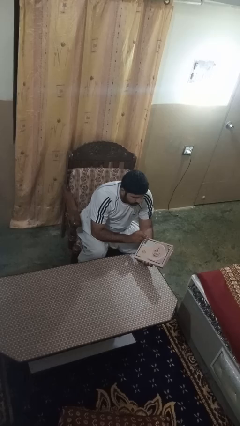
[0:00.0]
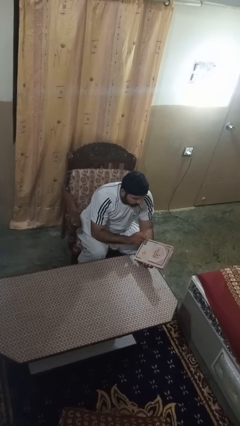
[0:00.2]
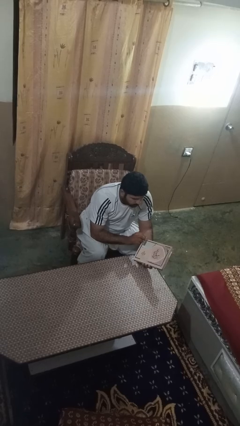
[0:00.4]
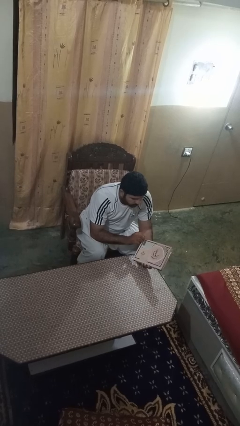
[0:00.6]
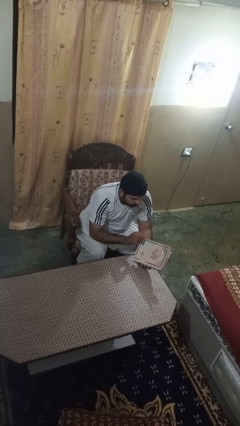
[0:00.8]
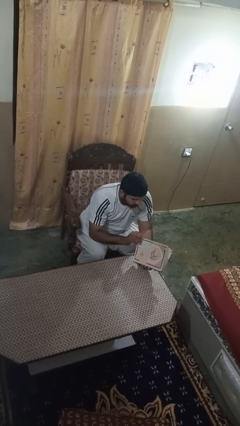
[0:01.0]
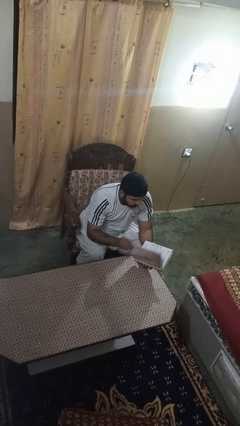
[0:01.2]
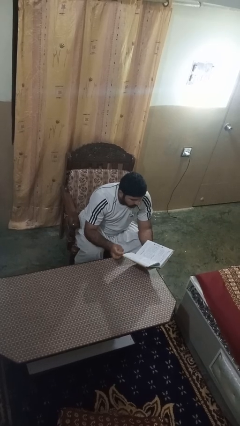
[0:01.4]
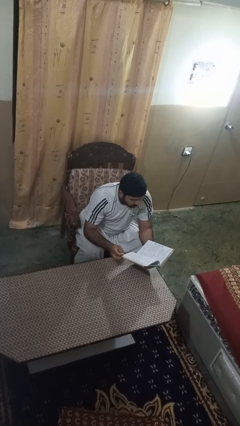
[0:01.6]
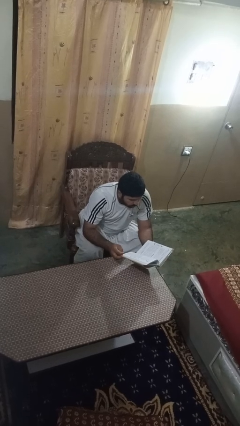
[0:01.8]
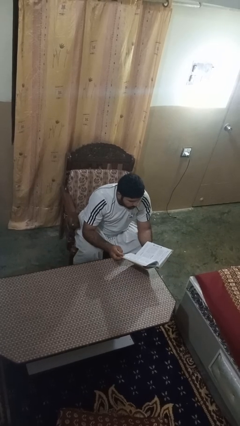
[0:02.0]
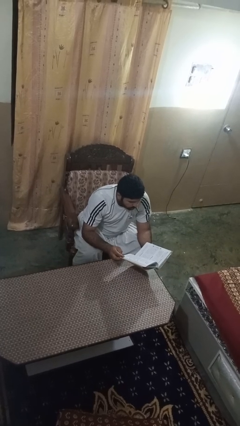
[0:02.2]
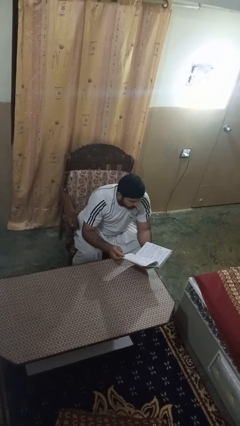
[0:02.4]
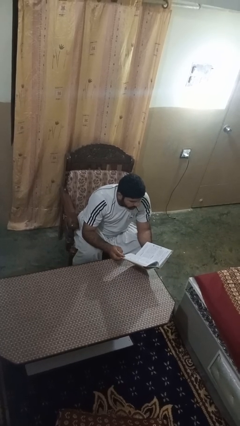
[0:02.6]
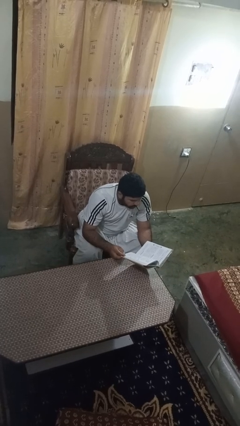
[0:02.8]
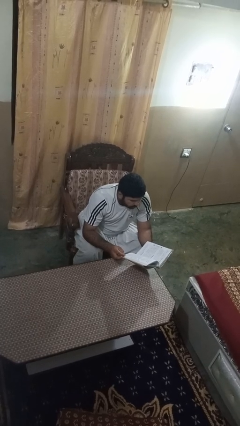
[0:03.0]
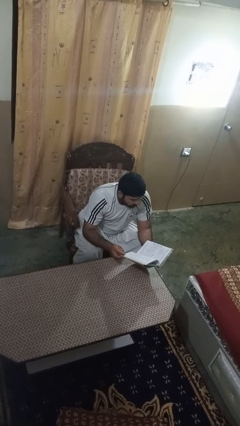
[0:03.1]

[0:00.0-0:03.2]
person reads book

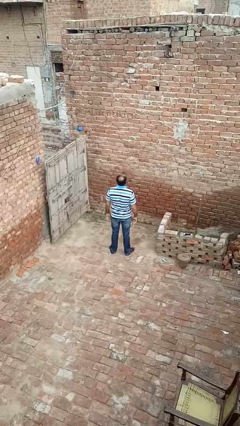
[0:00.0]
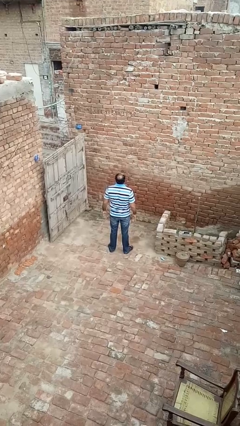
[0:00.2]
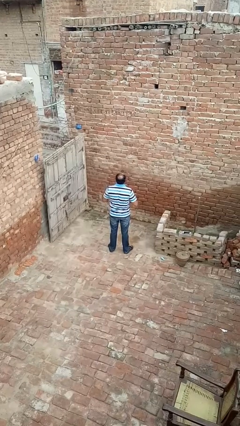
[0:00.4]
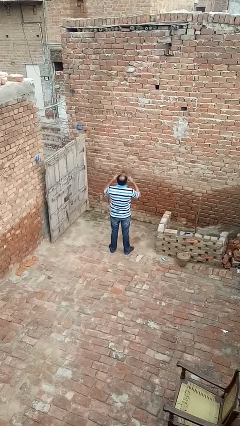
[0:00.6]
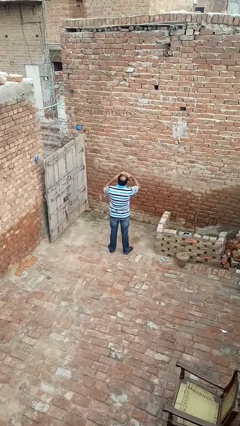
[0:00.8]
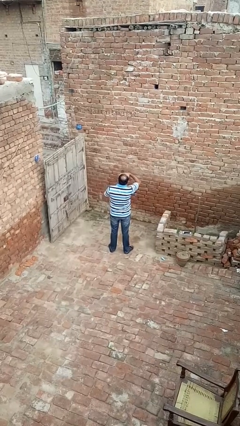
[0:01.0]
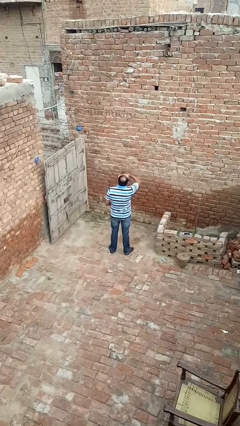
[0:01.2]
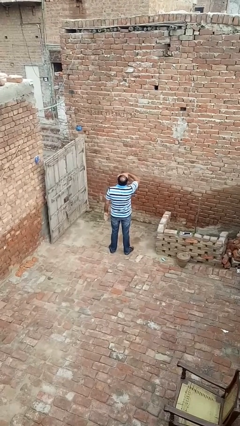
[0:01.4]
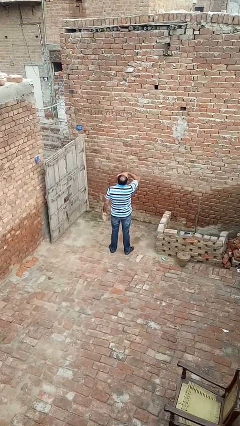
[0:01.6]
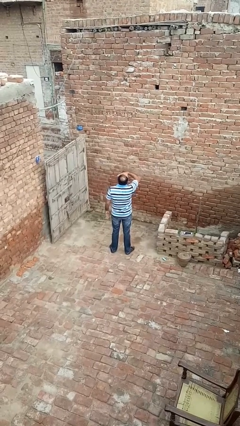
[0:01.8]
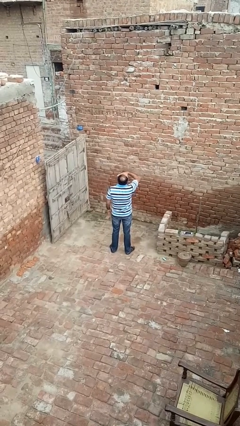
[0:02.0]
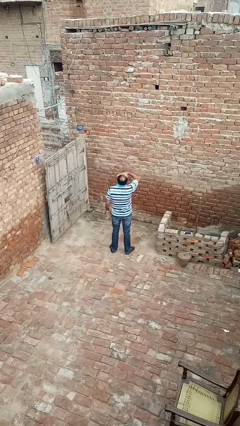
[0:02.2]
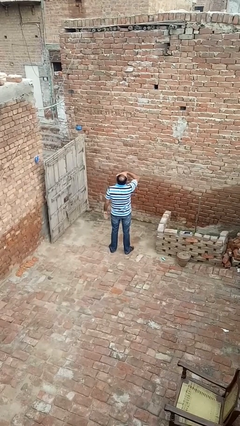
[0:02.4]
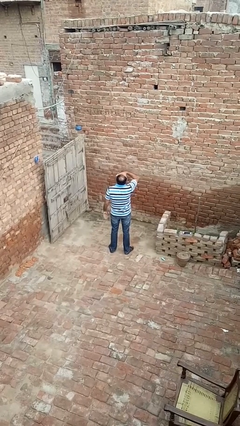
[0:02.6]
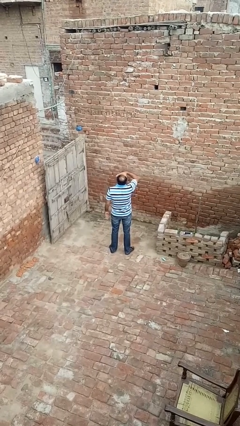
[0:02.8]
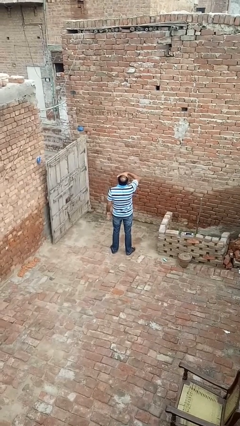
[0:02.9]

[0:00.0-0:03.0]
person shades eyes

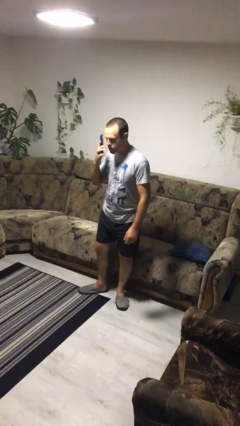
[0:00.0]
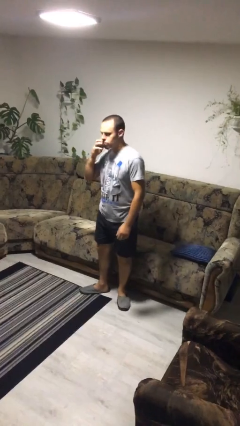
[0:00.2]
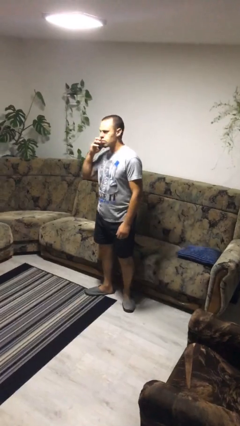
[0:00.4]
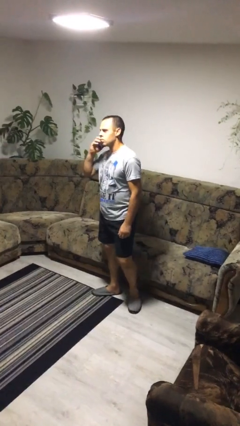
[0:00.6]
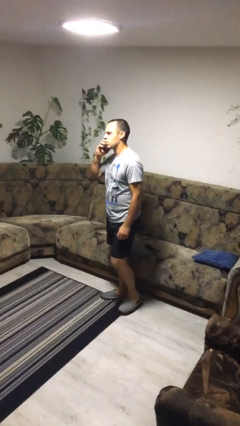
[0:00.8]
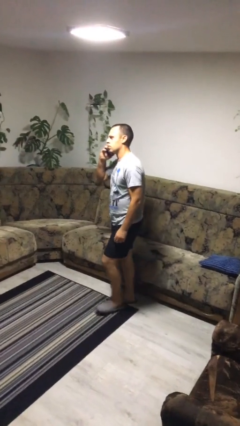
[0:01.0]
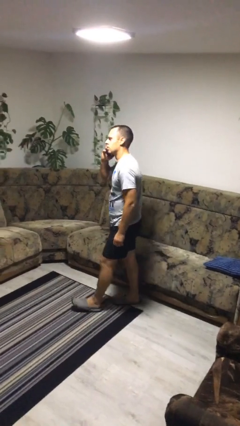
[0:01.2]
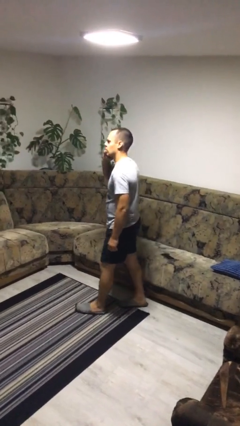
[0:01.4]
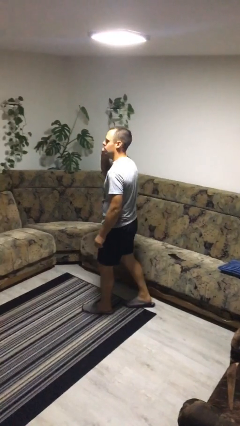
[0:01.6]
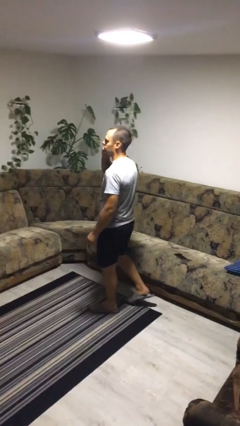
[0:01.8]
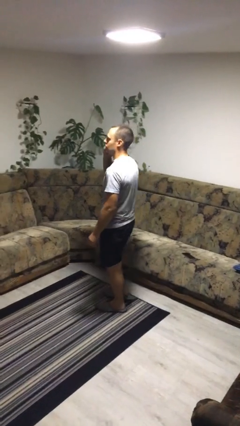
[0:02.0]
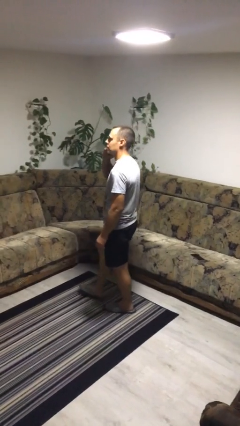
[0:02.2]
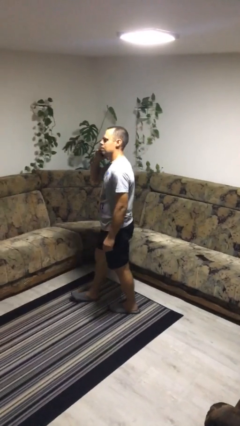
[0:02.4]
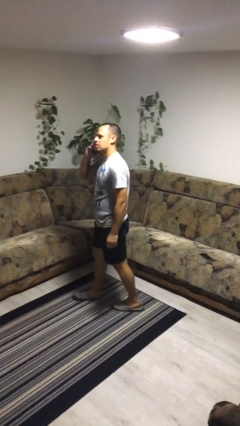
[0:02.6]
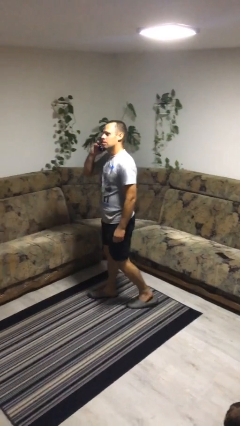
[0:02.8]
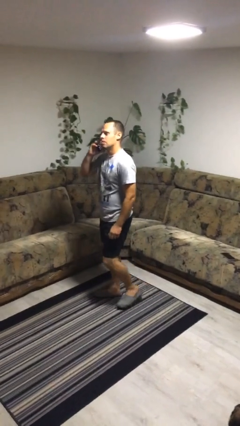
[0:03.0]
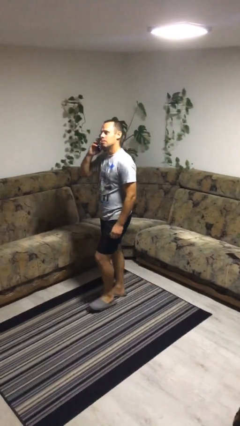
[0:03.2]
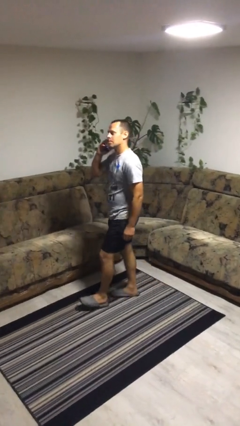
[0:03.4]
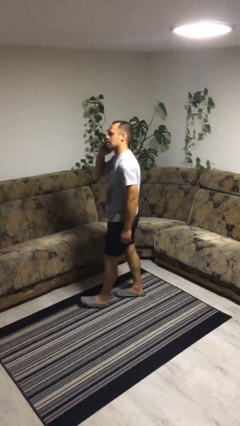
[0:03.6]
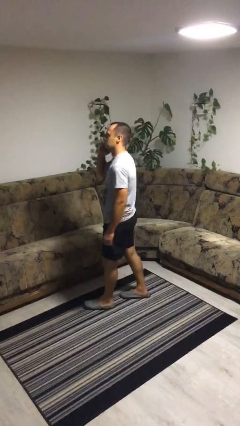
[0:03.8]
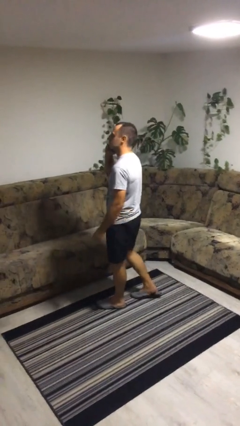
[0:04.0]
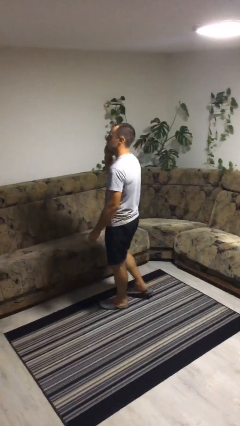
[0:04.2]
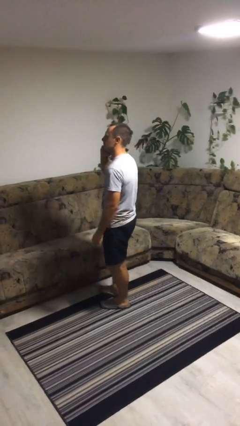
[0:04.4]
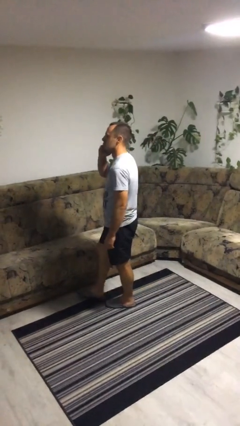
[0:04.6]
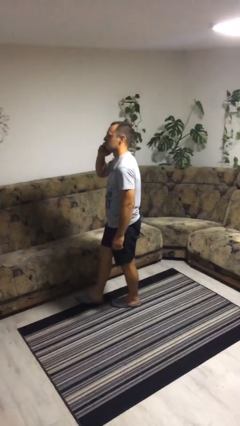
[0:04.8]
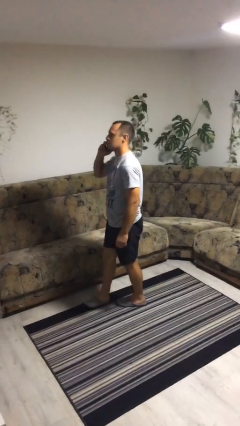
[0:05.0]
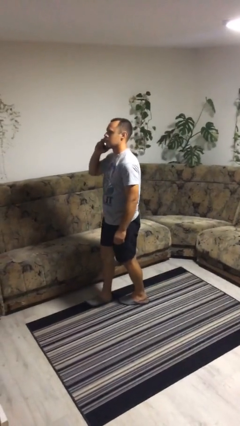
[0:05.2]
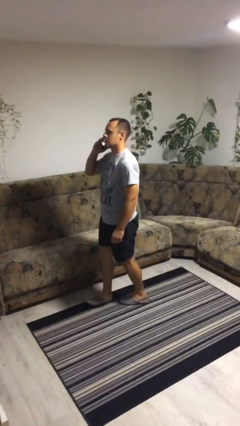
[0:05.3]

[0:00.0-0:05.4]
person talks on phone

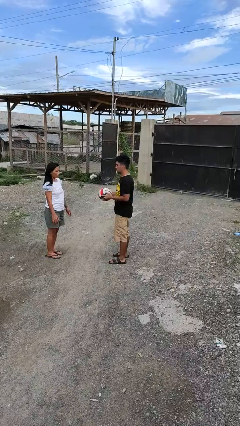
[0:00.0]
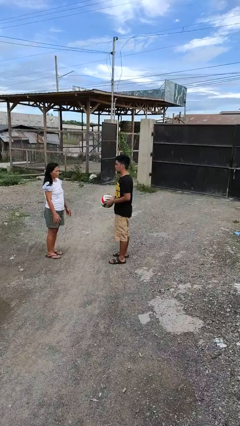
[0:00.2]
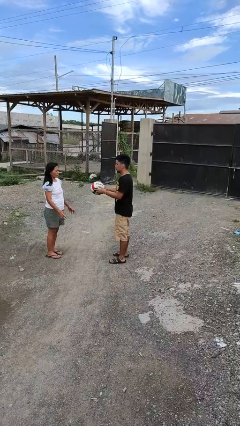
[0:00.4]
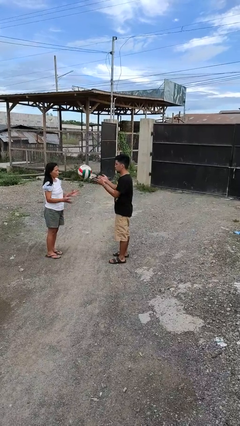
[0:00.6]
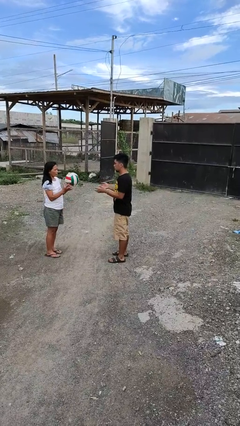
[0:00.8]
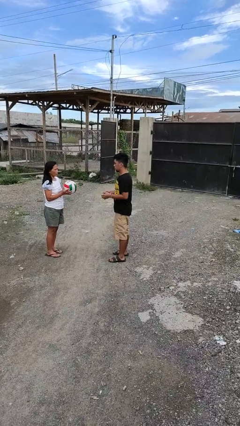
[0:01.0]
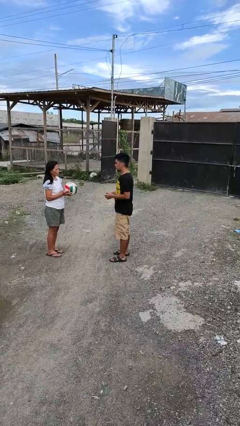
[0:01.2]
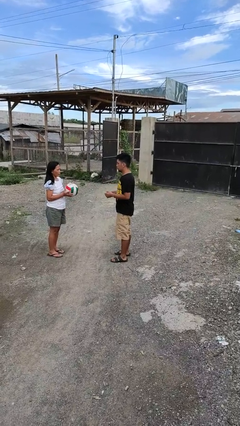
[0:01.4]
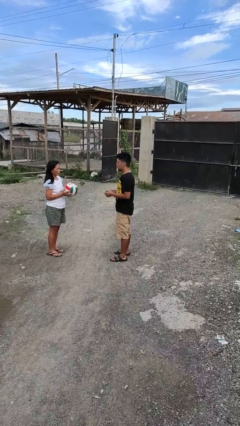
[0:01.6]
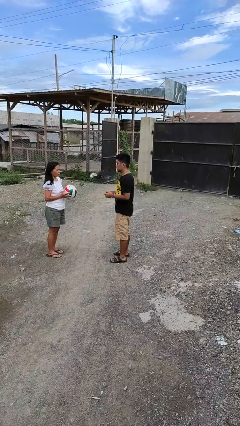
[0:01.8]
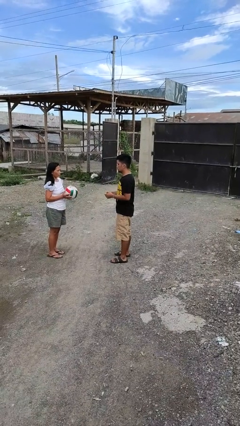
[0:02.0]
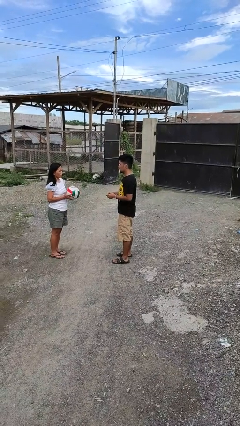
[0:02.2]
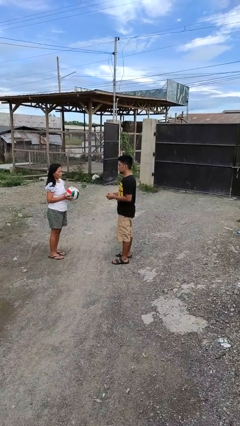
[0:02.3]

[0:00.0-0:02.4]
person throws object to person

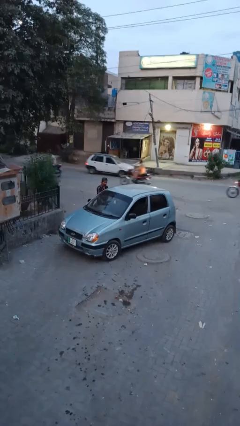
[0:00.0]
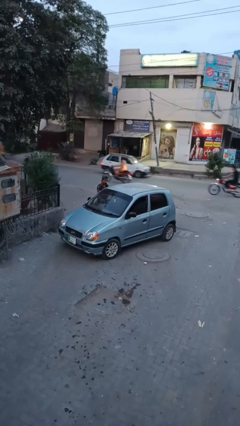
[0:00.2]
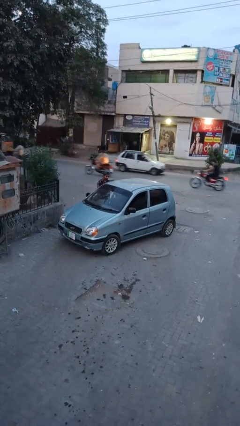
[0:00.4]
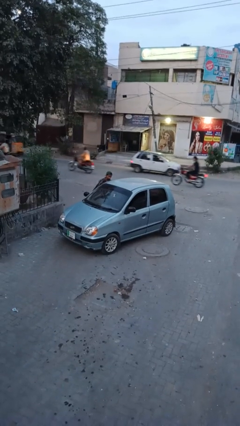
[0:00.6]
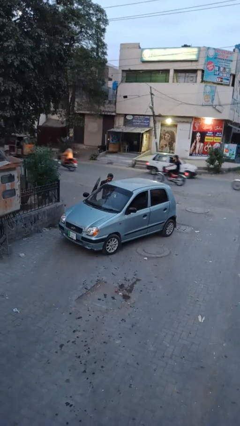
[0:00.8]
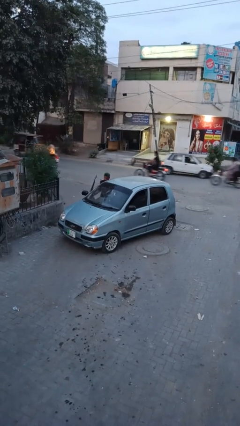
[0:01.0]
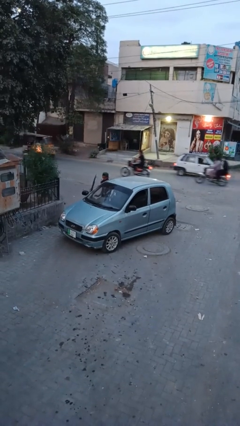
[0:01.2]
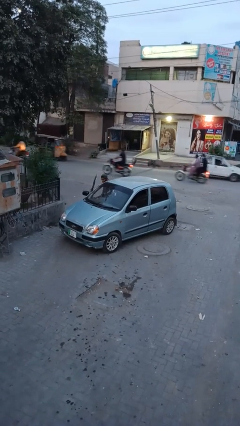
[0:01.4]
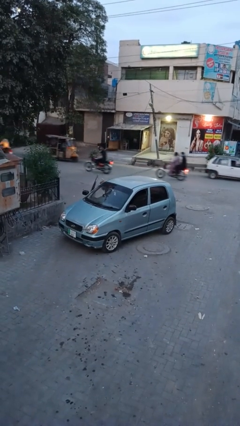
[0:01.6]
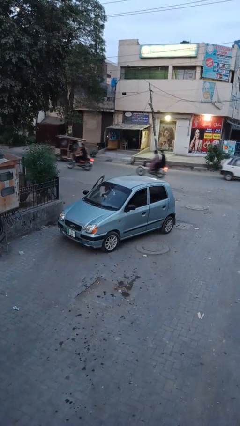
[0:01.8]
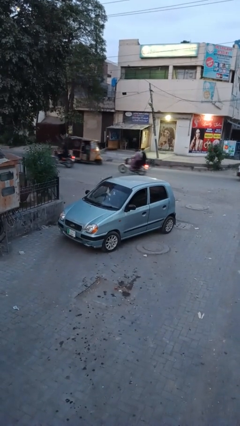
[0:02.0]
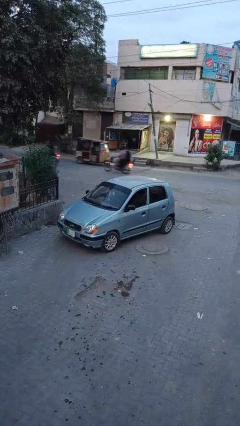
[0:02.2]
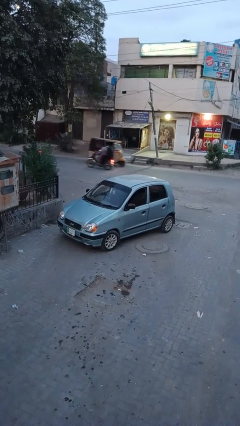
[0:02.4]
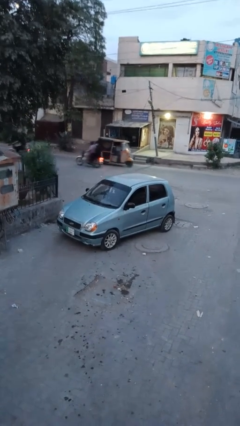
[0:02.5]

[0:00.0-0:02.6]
car picks up person

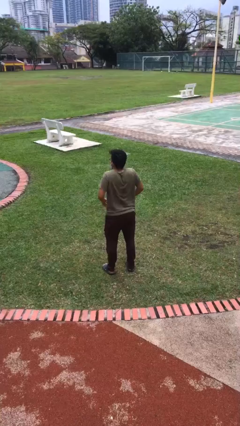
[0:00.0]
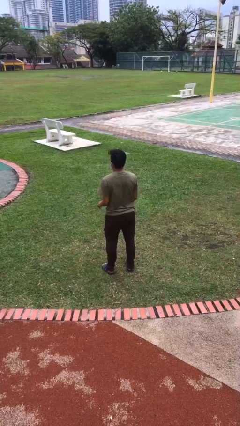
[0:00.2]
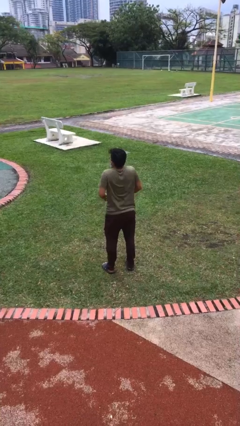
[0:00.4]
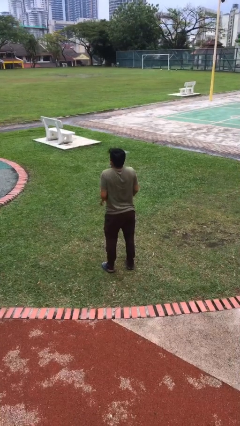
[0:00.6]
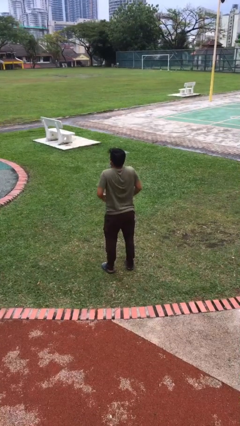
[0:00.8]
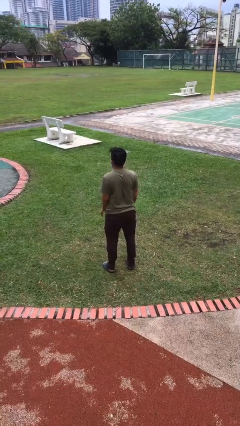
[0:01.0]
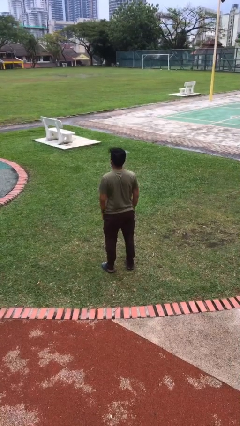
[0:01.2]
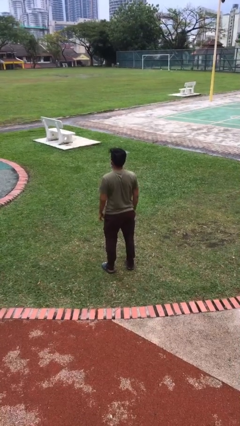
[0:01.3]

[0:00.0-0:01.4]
person shrugs
